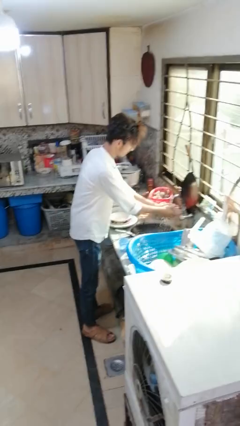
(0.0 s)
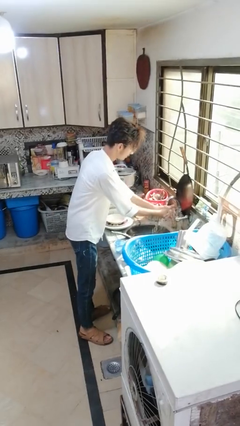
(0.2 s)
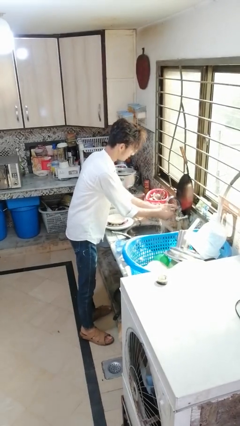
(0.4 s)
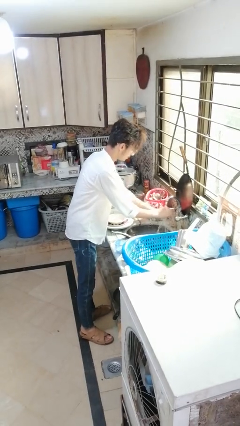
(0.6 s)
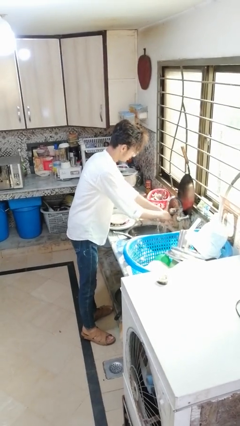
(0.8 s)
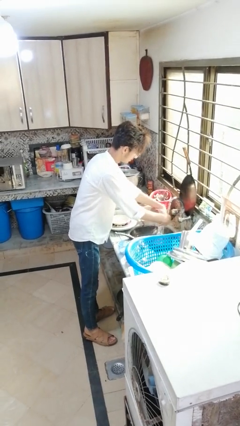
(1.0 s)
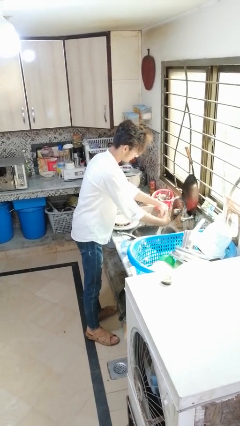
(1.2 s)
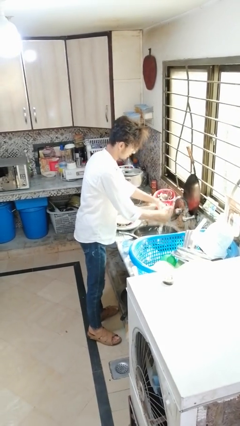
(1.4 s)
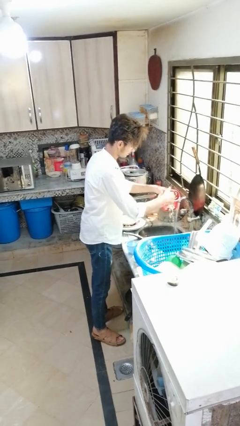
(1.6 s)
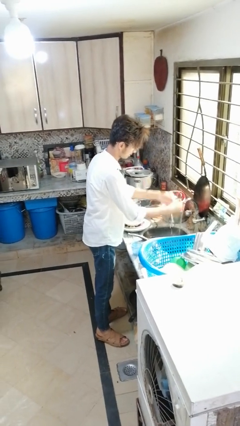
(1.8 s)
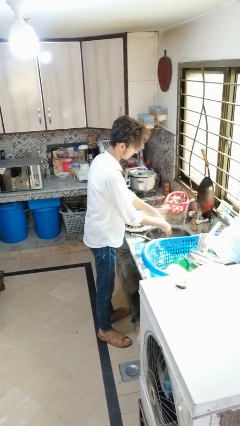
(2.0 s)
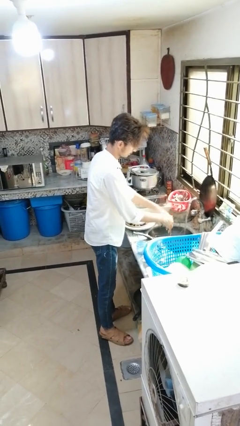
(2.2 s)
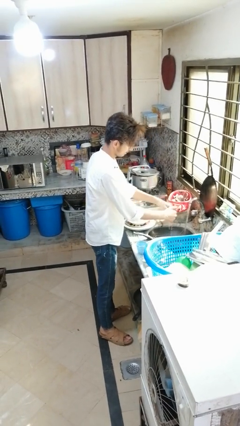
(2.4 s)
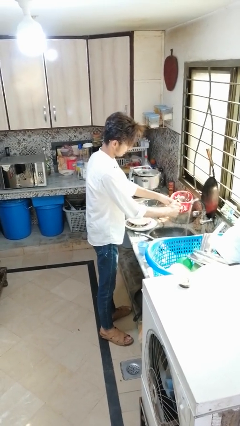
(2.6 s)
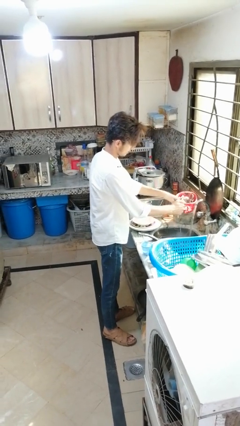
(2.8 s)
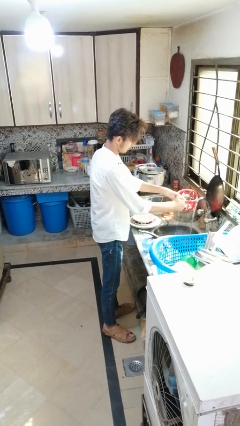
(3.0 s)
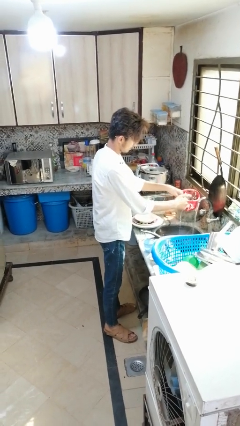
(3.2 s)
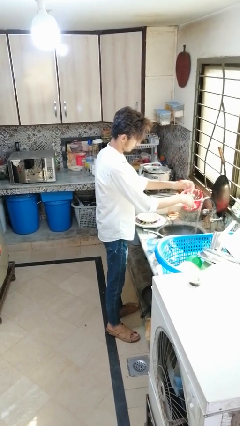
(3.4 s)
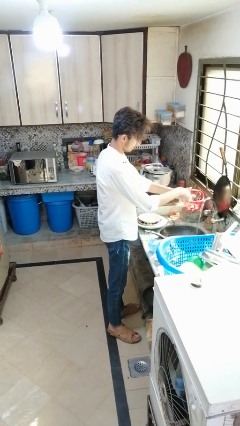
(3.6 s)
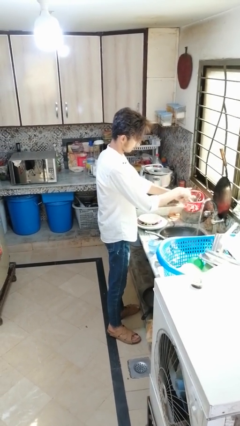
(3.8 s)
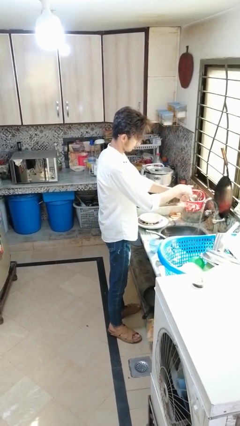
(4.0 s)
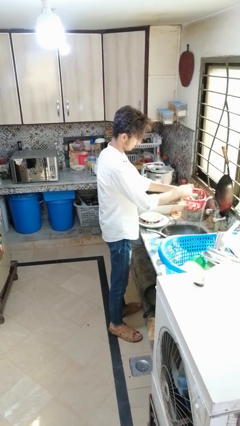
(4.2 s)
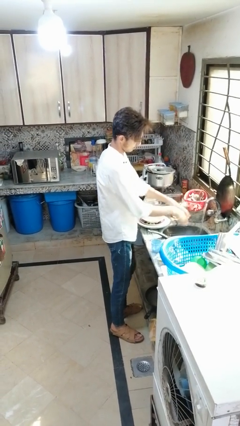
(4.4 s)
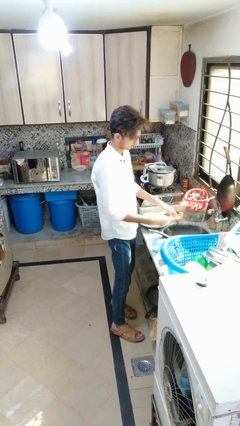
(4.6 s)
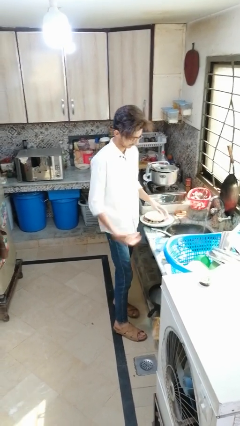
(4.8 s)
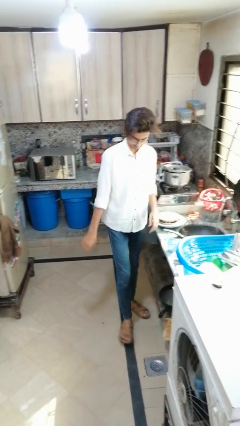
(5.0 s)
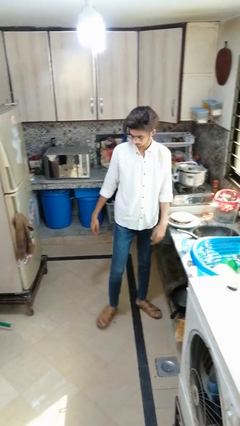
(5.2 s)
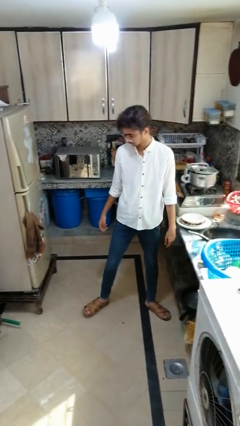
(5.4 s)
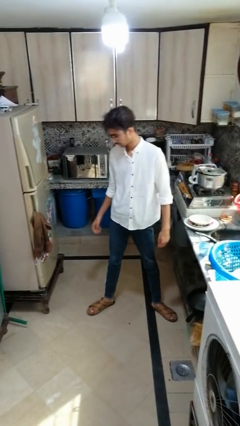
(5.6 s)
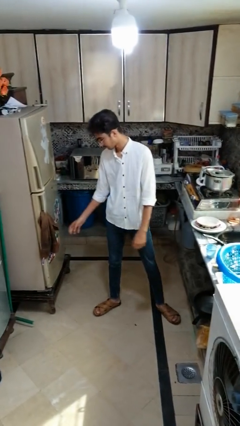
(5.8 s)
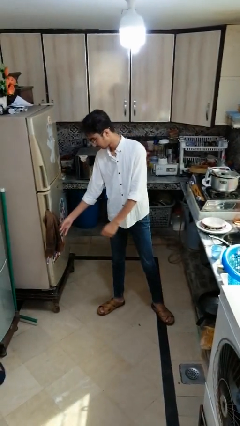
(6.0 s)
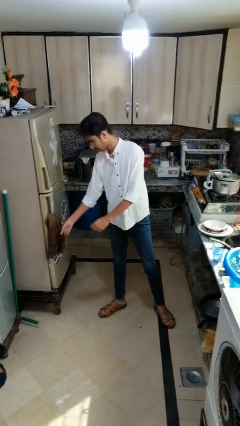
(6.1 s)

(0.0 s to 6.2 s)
person washes hands

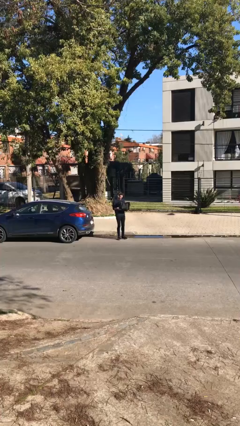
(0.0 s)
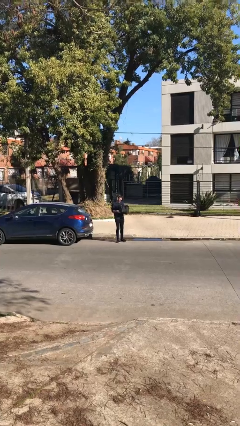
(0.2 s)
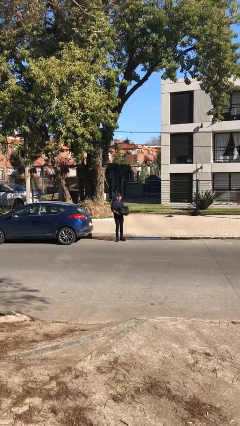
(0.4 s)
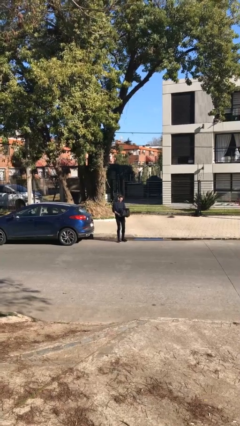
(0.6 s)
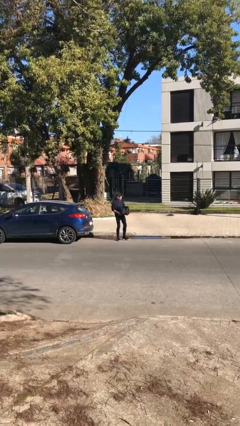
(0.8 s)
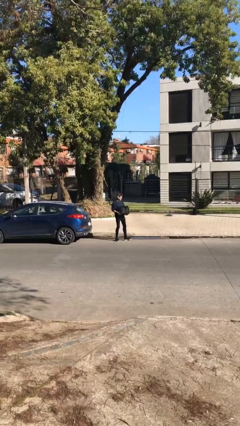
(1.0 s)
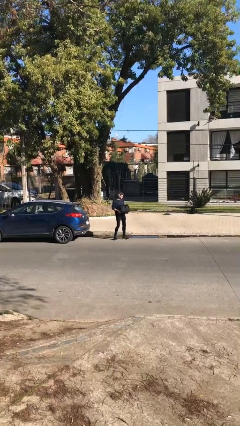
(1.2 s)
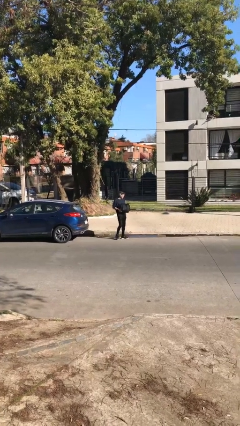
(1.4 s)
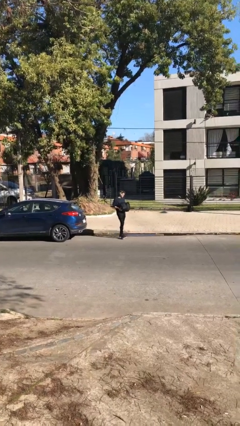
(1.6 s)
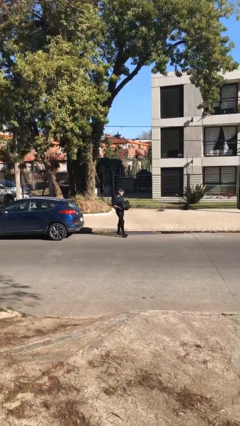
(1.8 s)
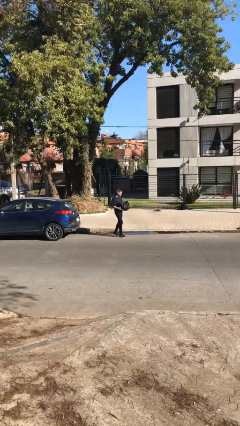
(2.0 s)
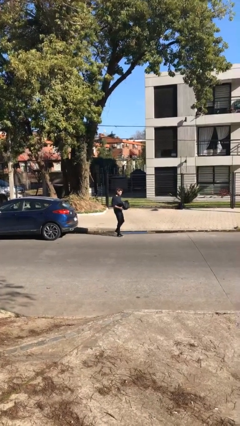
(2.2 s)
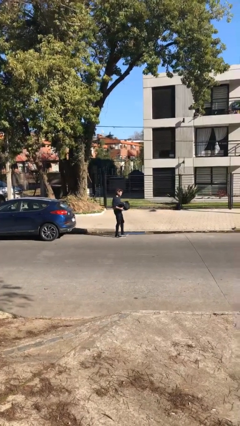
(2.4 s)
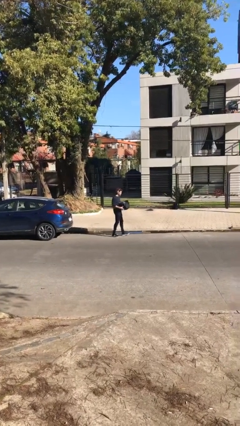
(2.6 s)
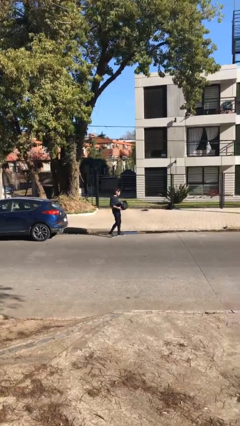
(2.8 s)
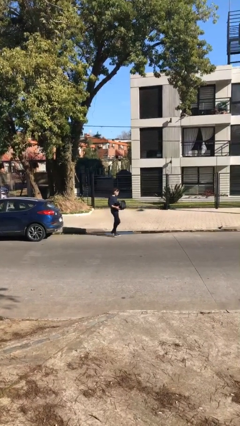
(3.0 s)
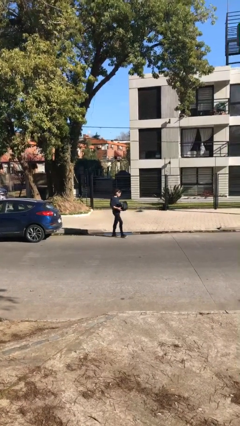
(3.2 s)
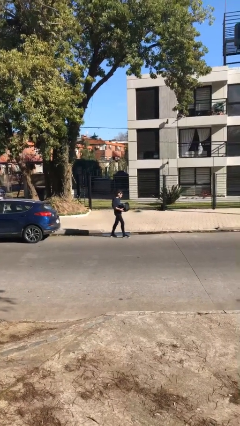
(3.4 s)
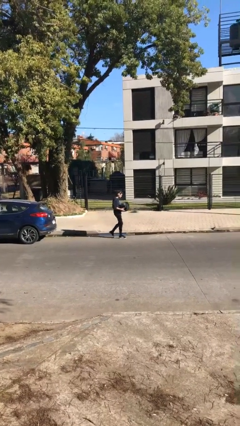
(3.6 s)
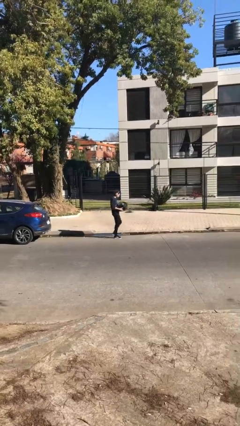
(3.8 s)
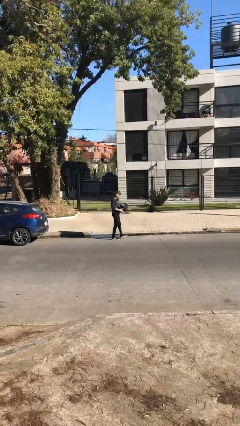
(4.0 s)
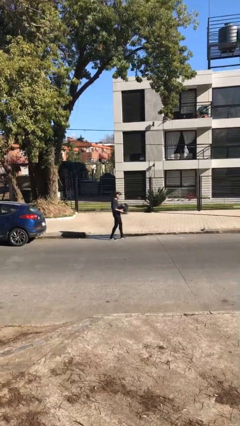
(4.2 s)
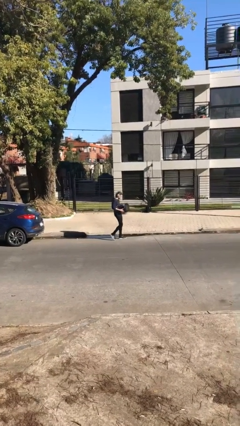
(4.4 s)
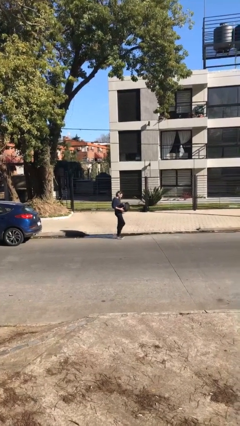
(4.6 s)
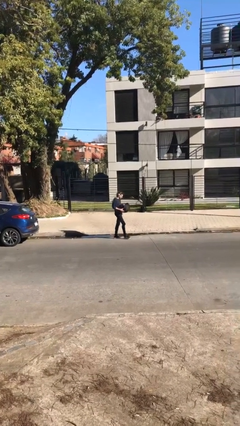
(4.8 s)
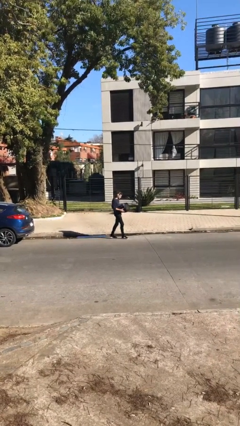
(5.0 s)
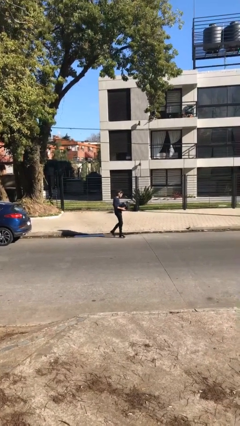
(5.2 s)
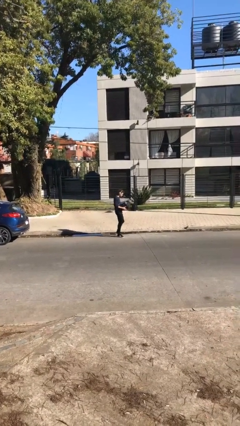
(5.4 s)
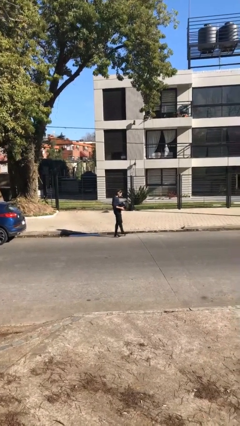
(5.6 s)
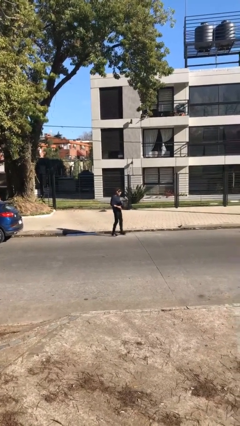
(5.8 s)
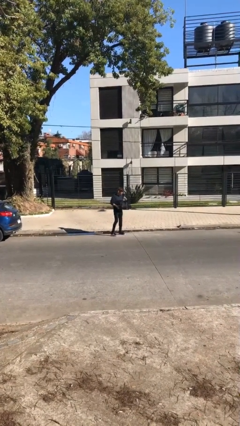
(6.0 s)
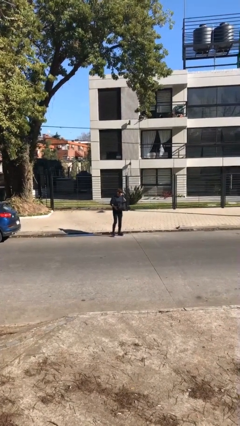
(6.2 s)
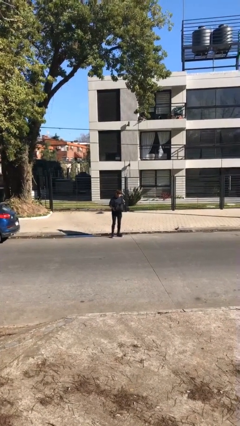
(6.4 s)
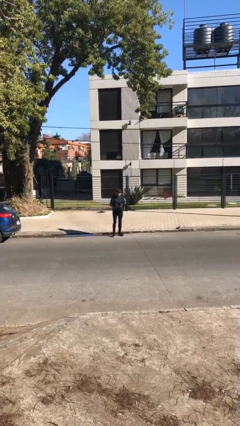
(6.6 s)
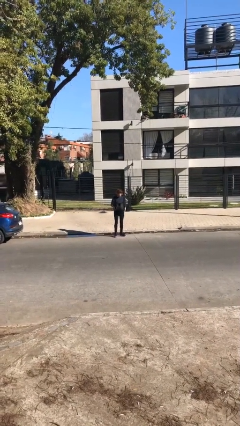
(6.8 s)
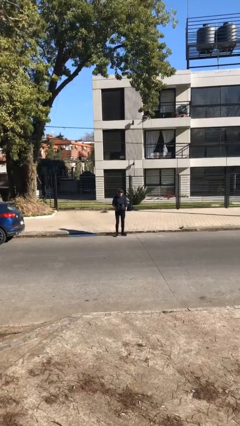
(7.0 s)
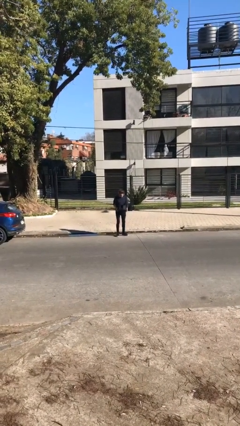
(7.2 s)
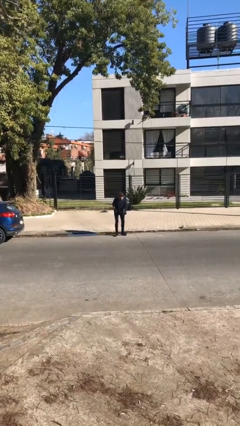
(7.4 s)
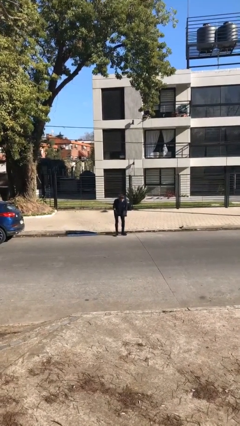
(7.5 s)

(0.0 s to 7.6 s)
person carries heavy object

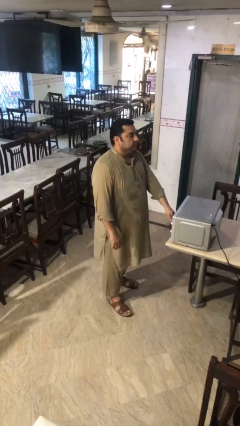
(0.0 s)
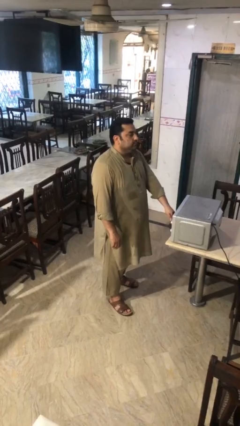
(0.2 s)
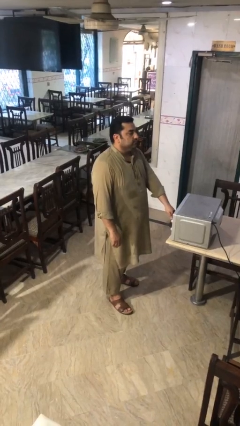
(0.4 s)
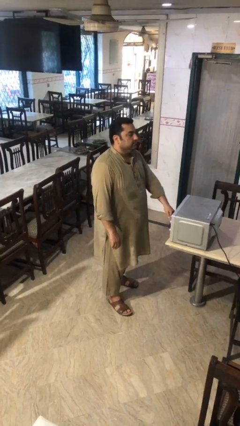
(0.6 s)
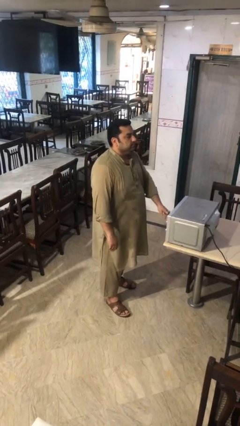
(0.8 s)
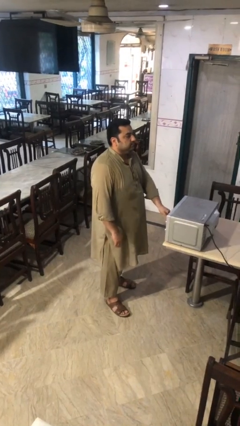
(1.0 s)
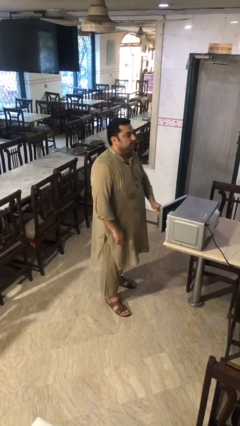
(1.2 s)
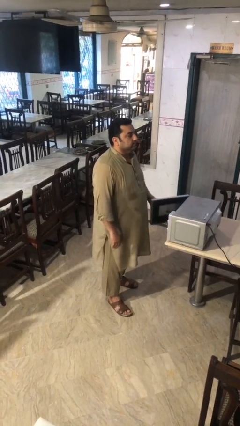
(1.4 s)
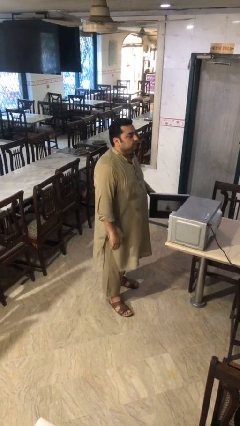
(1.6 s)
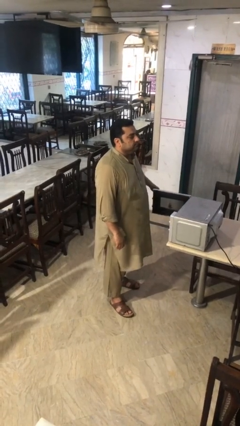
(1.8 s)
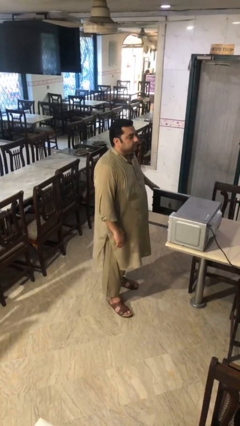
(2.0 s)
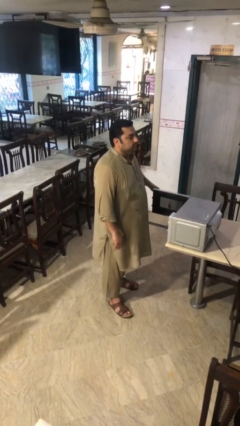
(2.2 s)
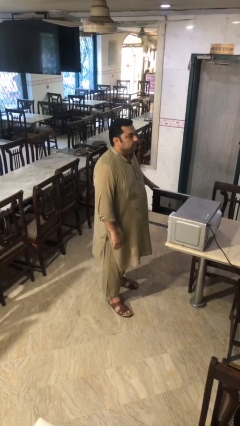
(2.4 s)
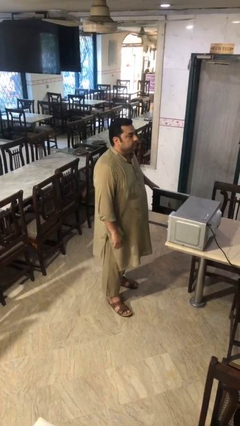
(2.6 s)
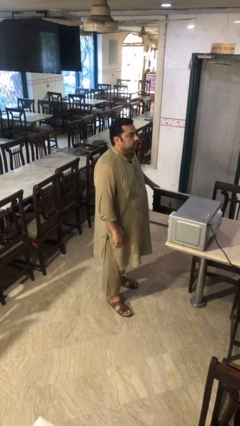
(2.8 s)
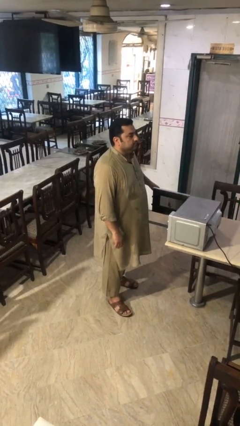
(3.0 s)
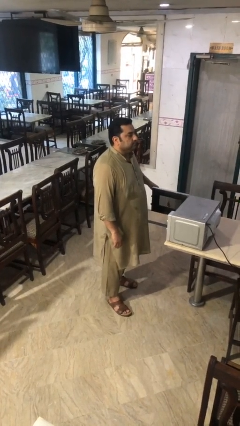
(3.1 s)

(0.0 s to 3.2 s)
person opens microwave

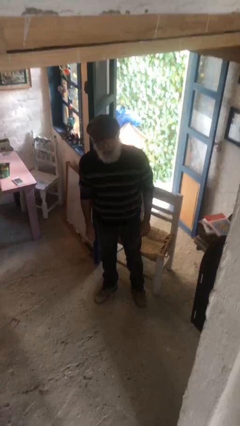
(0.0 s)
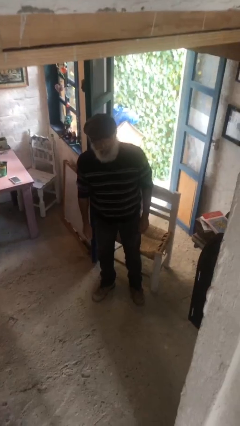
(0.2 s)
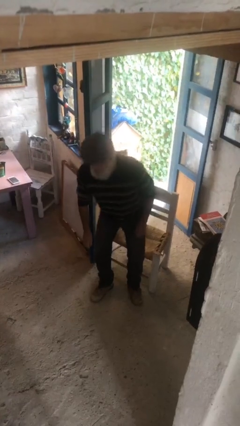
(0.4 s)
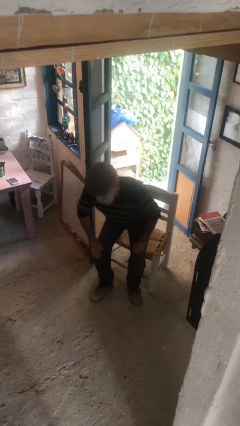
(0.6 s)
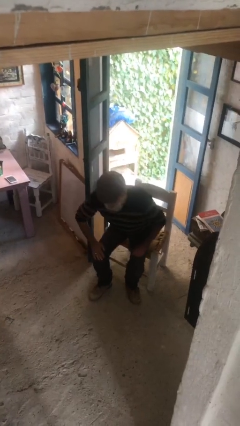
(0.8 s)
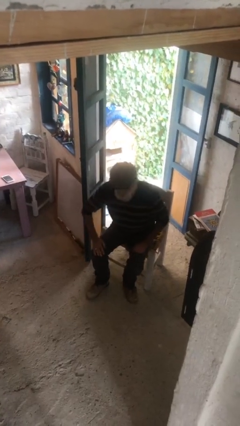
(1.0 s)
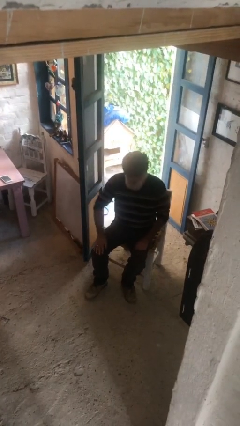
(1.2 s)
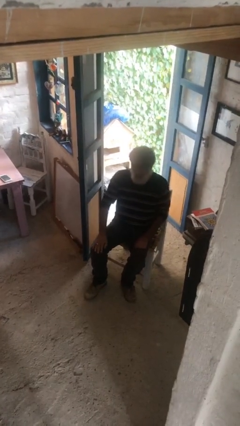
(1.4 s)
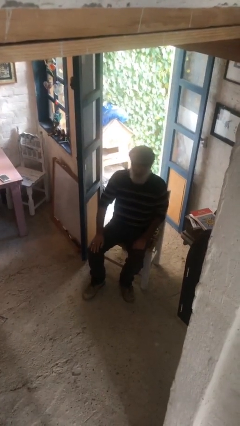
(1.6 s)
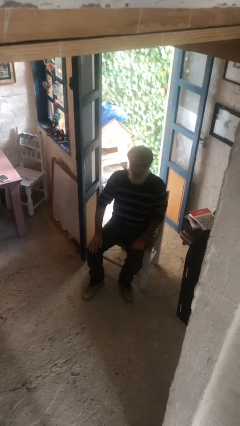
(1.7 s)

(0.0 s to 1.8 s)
person sits down
